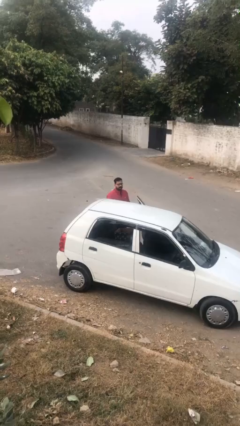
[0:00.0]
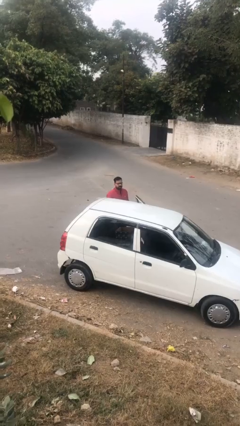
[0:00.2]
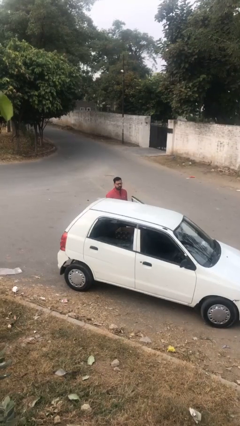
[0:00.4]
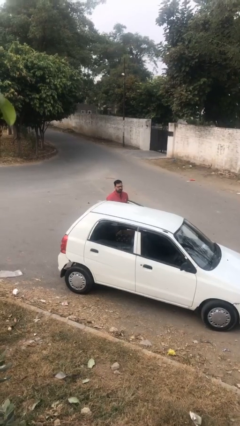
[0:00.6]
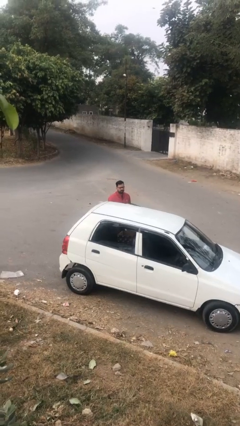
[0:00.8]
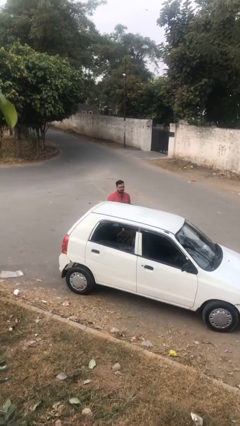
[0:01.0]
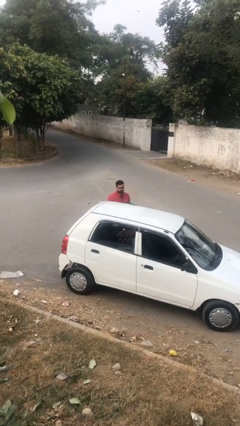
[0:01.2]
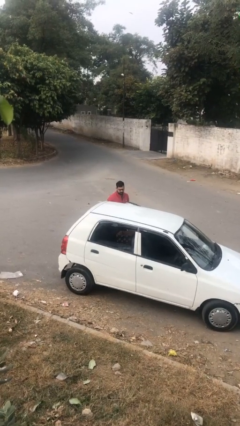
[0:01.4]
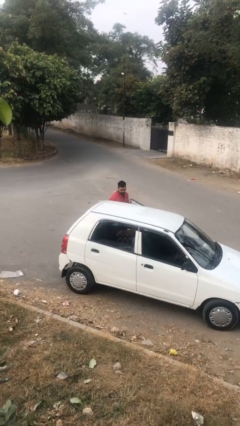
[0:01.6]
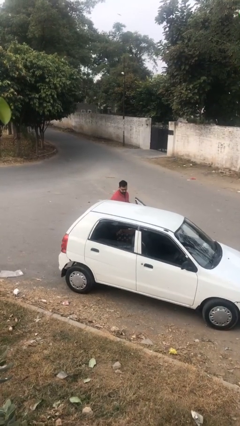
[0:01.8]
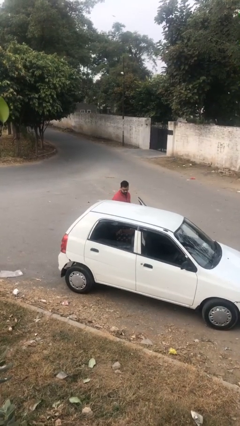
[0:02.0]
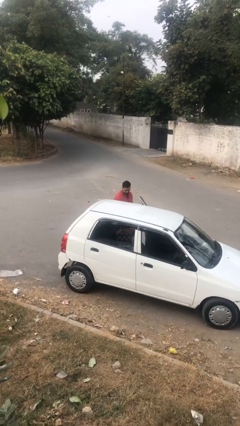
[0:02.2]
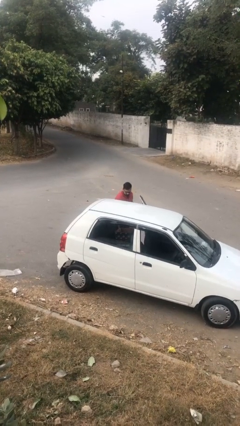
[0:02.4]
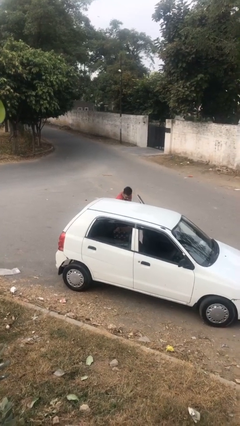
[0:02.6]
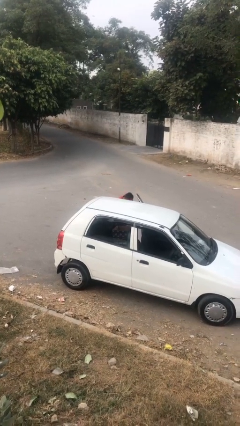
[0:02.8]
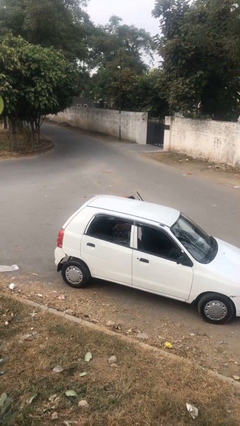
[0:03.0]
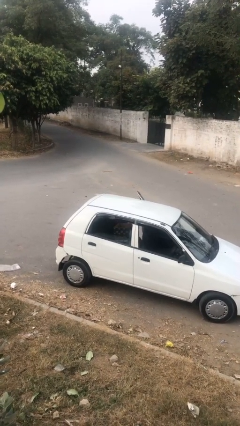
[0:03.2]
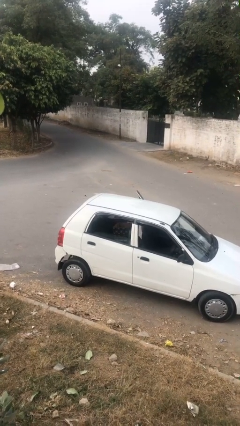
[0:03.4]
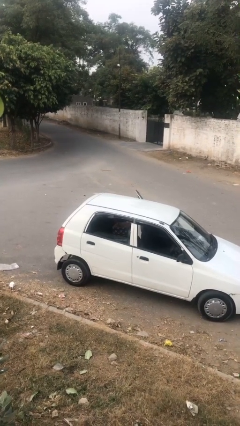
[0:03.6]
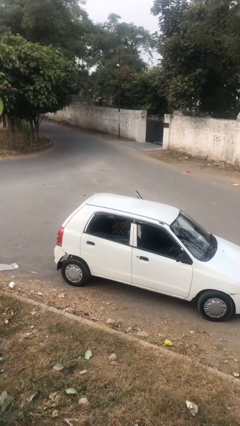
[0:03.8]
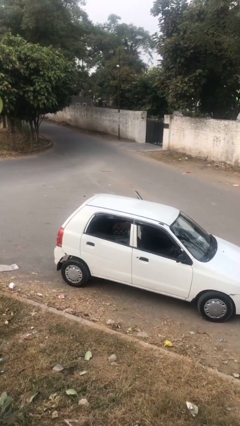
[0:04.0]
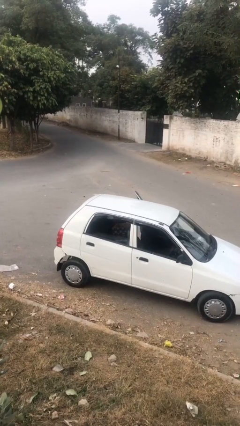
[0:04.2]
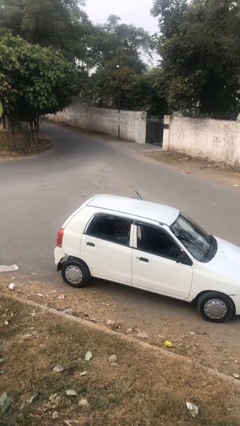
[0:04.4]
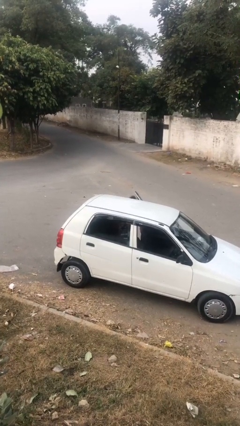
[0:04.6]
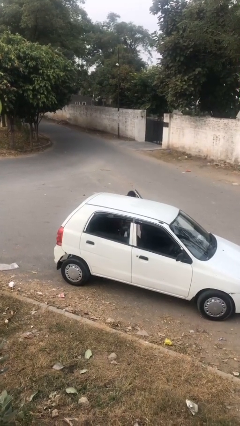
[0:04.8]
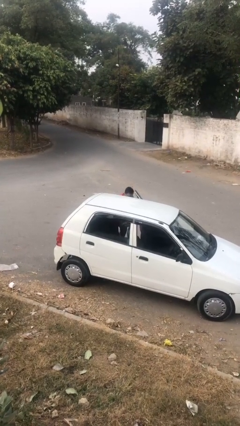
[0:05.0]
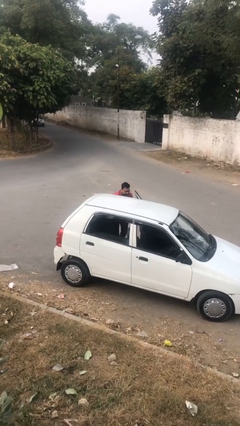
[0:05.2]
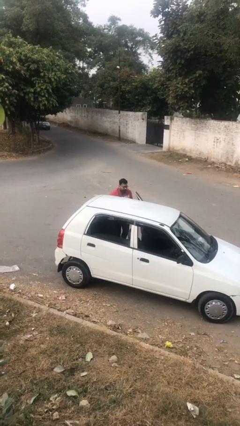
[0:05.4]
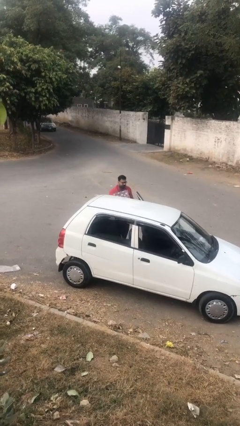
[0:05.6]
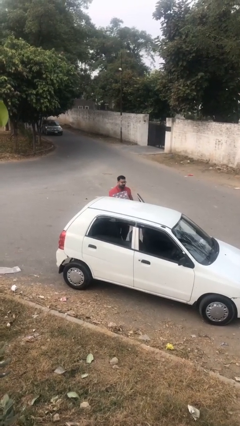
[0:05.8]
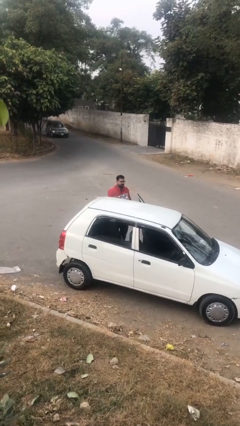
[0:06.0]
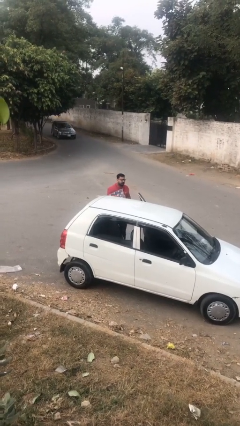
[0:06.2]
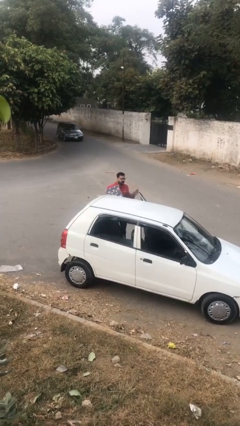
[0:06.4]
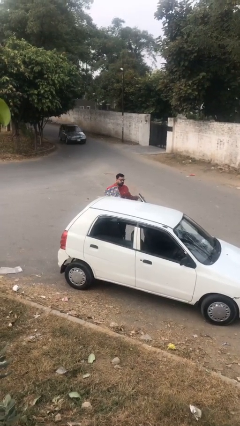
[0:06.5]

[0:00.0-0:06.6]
person unloads car

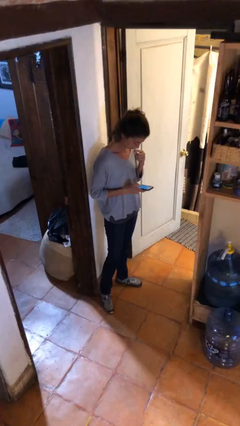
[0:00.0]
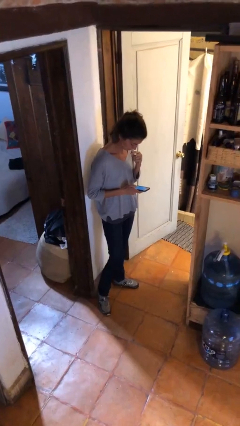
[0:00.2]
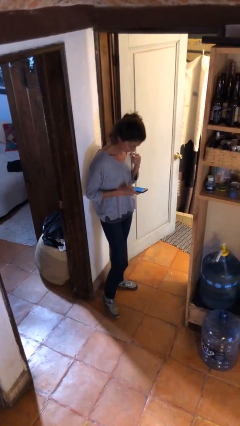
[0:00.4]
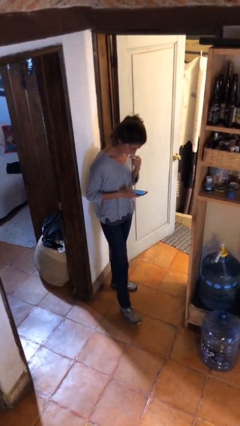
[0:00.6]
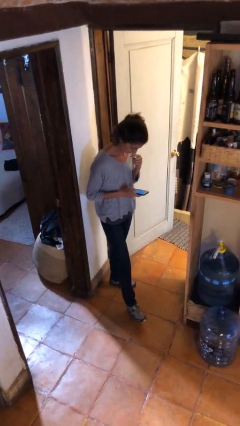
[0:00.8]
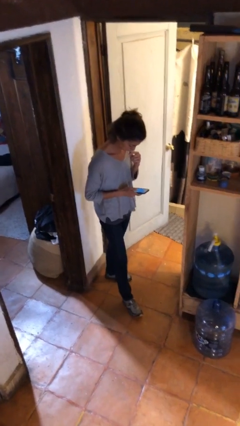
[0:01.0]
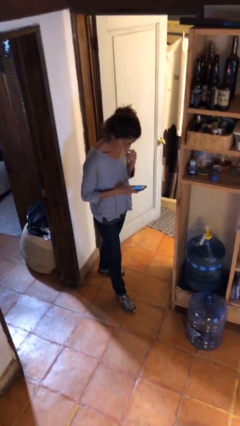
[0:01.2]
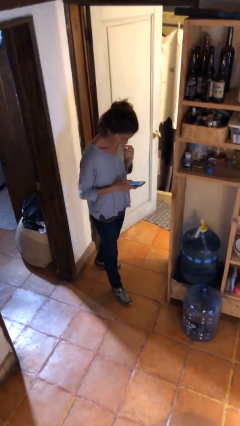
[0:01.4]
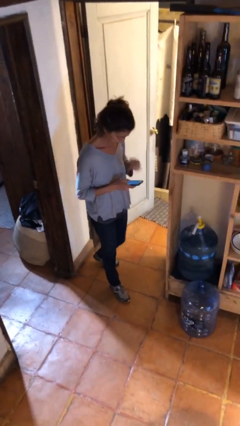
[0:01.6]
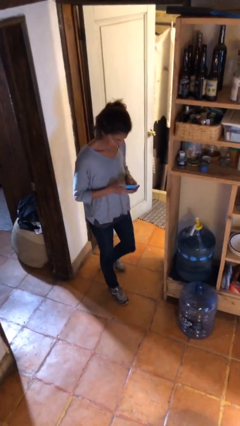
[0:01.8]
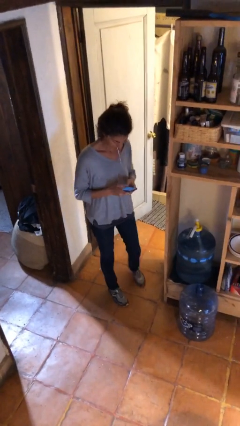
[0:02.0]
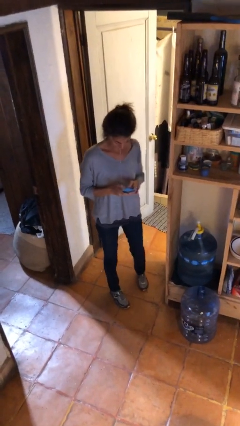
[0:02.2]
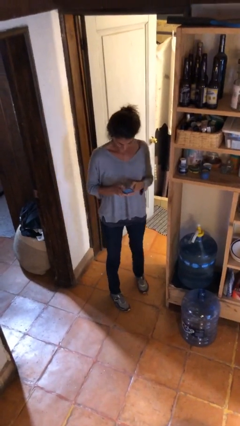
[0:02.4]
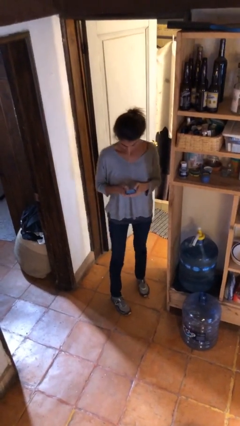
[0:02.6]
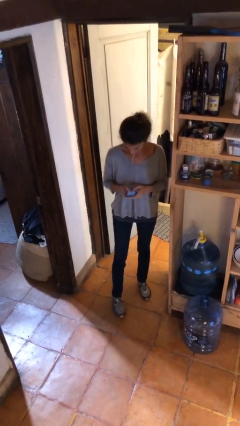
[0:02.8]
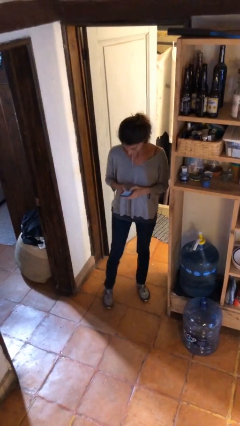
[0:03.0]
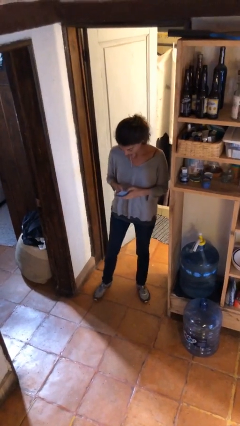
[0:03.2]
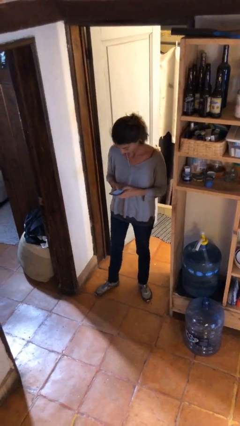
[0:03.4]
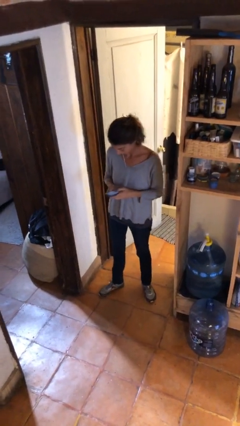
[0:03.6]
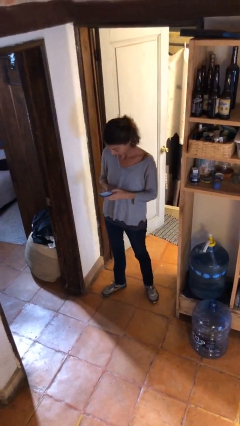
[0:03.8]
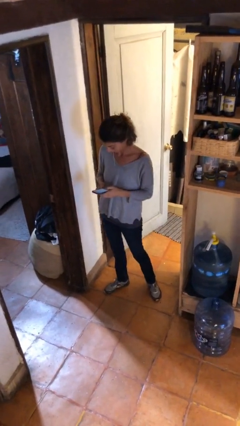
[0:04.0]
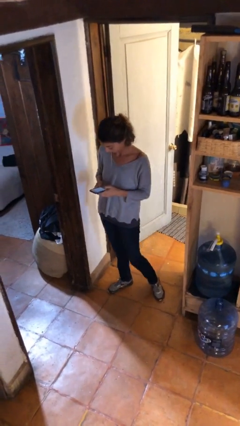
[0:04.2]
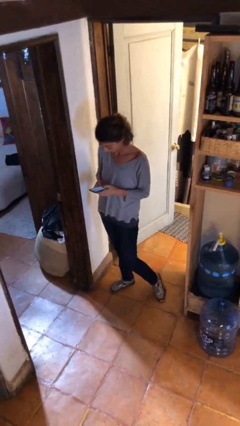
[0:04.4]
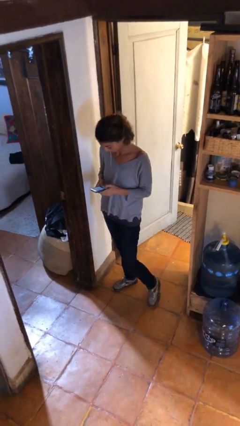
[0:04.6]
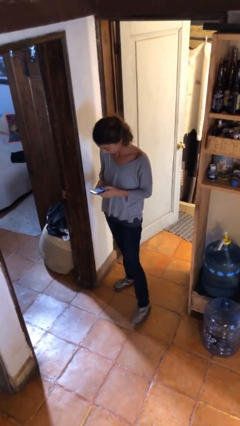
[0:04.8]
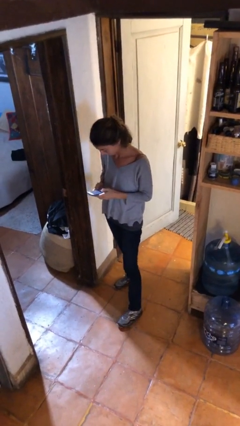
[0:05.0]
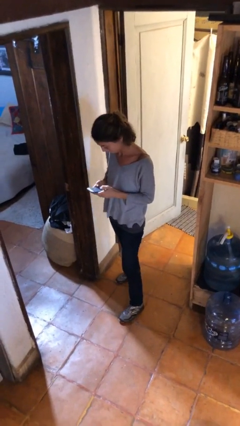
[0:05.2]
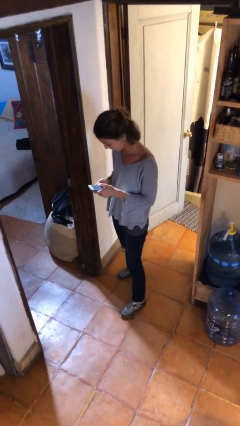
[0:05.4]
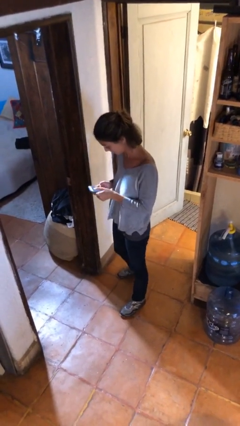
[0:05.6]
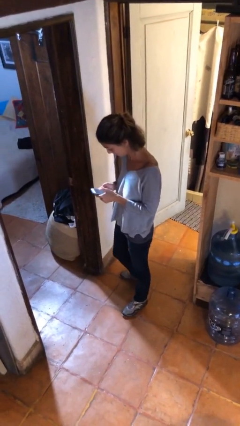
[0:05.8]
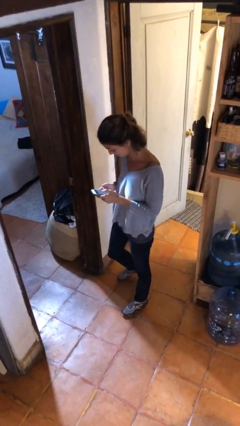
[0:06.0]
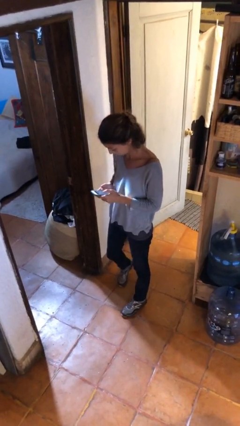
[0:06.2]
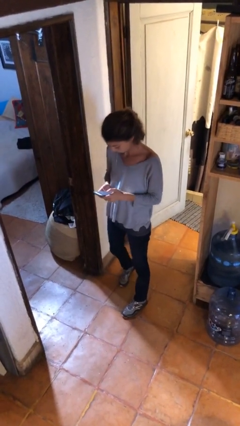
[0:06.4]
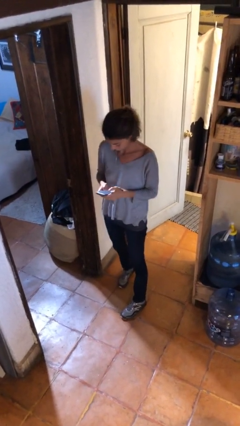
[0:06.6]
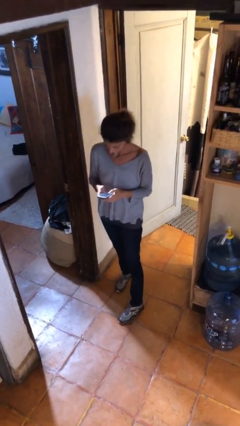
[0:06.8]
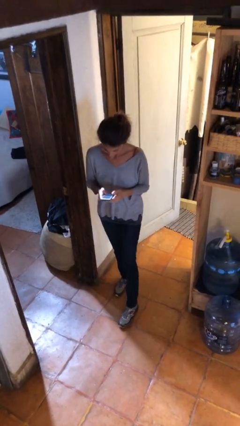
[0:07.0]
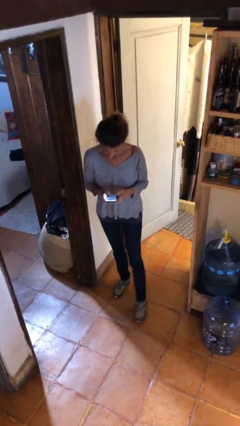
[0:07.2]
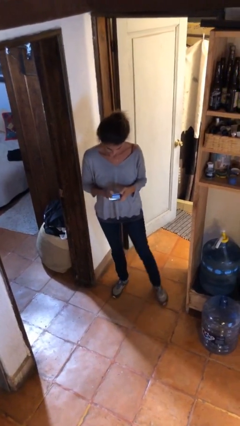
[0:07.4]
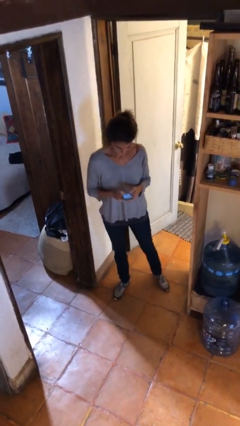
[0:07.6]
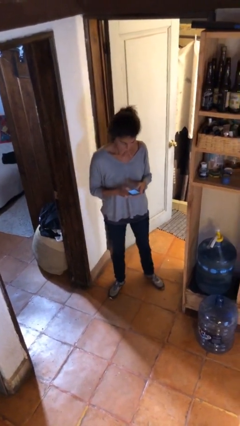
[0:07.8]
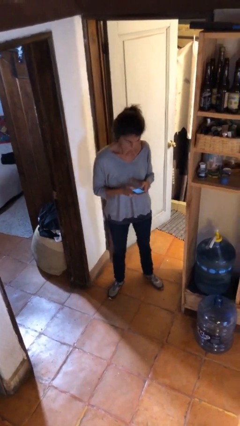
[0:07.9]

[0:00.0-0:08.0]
person texts on phone

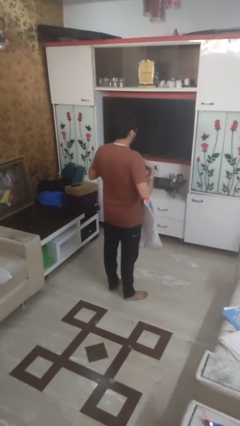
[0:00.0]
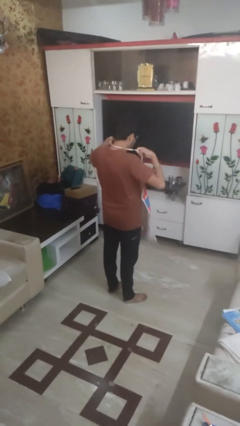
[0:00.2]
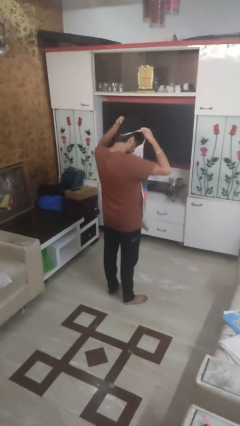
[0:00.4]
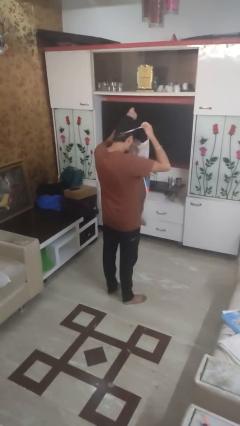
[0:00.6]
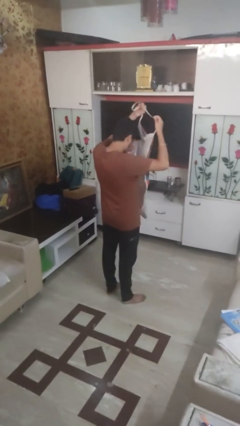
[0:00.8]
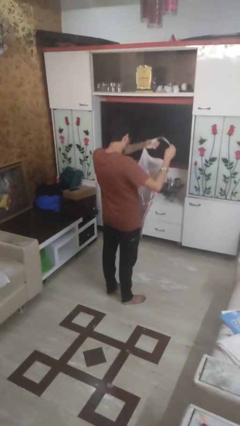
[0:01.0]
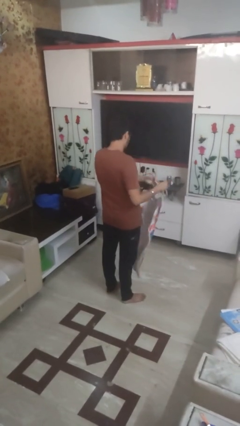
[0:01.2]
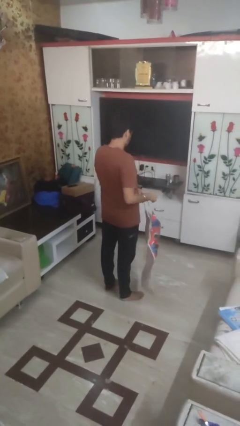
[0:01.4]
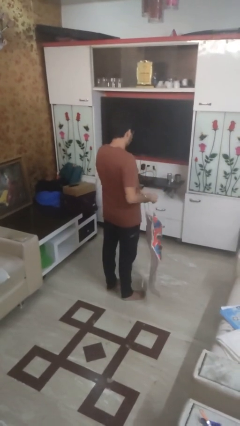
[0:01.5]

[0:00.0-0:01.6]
person takes off apron

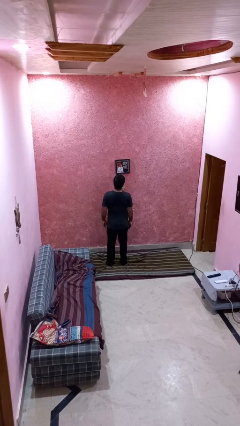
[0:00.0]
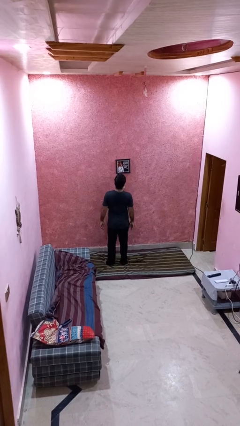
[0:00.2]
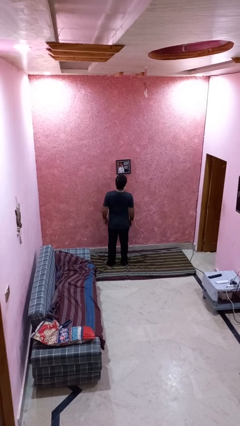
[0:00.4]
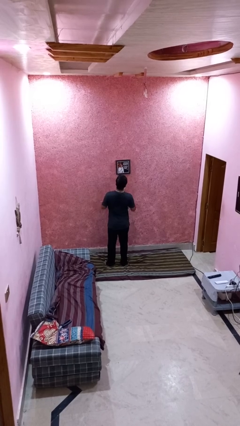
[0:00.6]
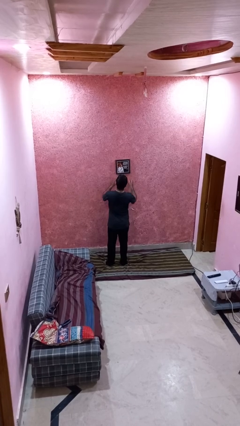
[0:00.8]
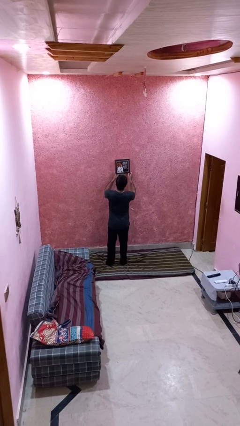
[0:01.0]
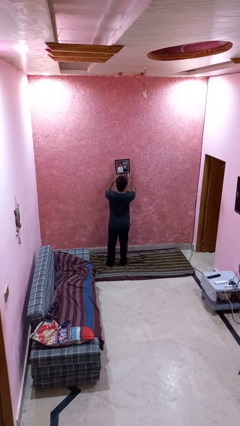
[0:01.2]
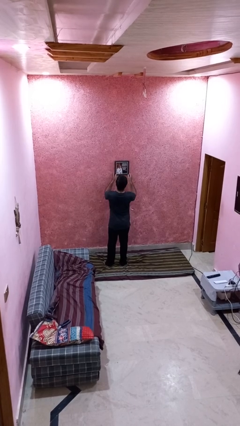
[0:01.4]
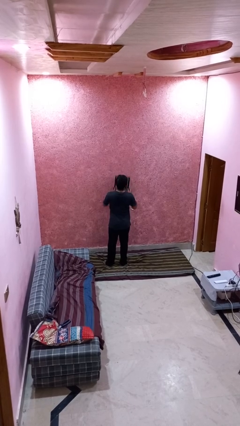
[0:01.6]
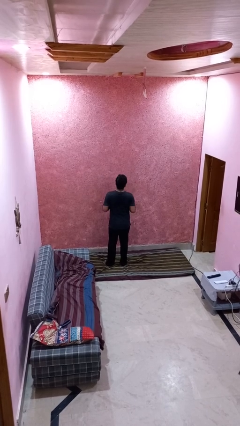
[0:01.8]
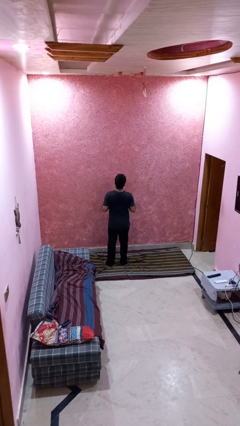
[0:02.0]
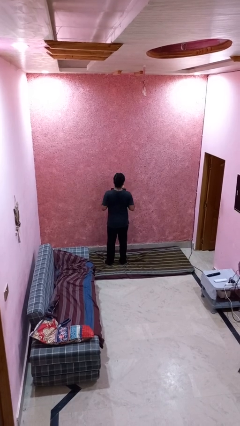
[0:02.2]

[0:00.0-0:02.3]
person takes down picture frame
